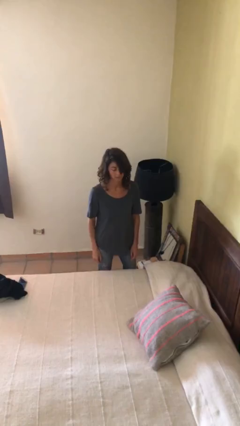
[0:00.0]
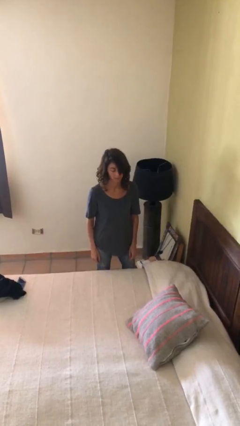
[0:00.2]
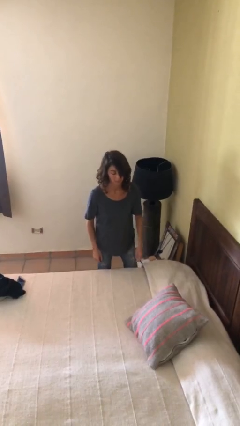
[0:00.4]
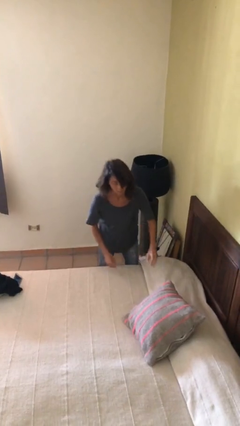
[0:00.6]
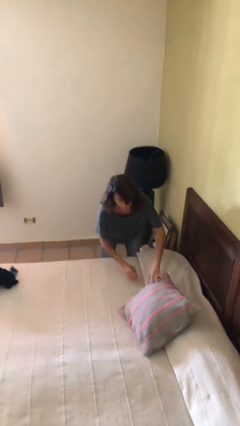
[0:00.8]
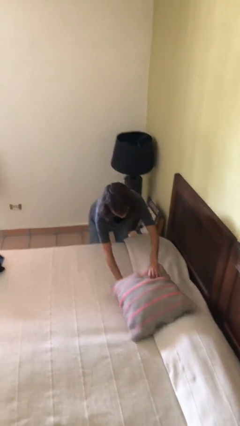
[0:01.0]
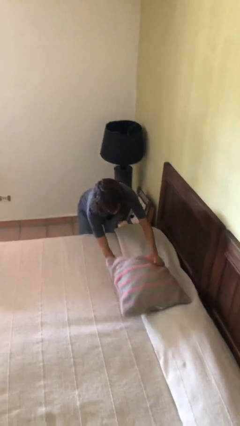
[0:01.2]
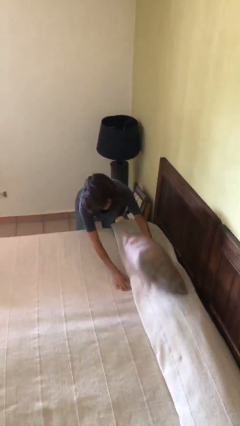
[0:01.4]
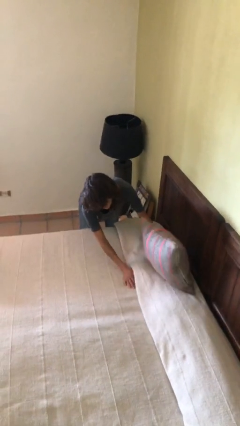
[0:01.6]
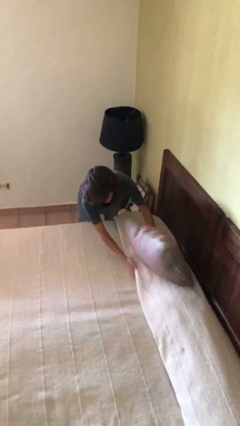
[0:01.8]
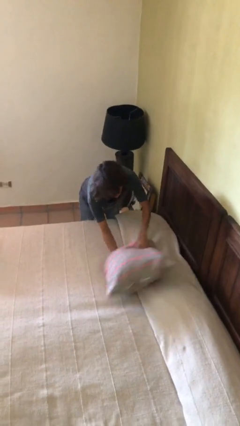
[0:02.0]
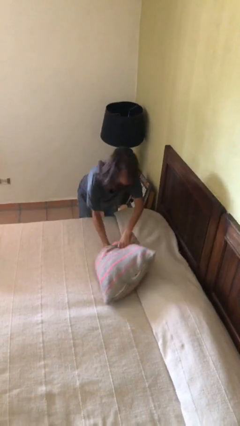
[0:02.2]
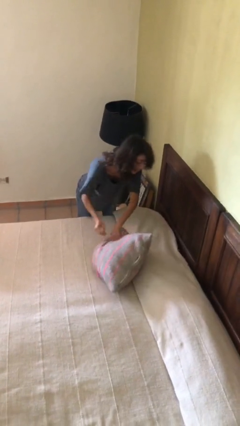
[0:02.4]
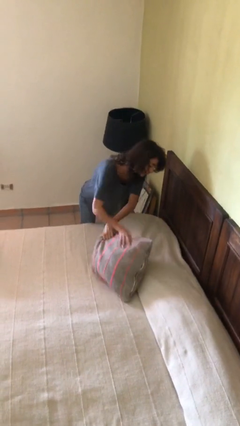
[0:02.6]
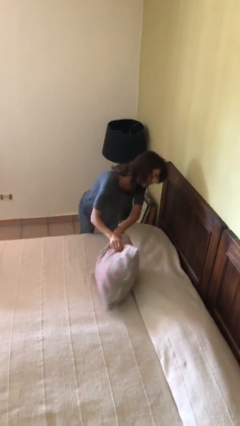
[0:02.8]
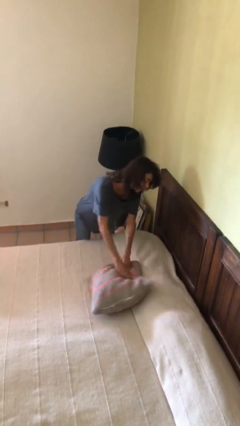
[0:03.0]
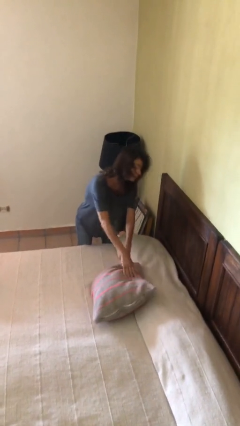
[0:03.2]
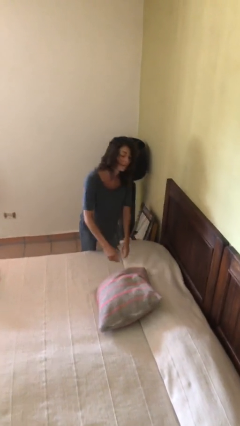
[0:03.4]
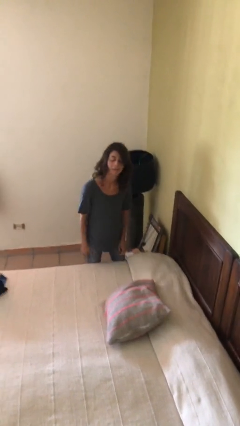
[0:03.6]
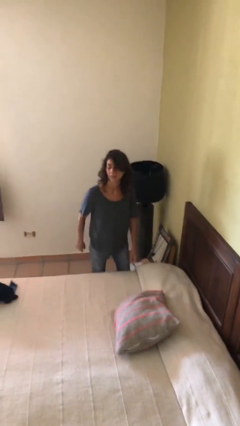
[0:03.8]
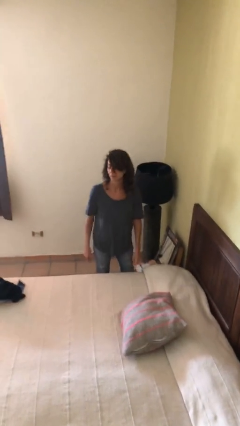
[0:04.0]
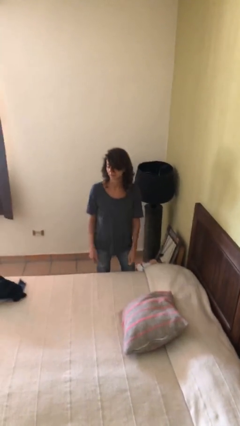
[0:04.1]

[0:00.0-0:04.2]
person searches in couch

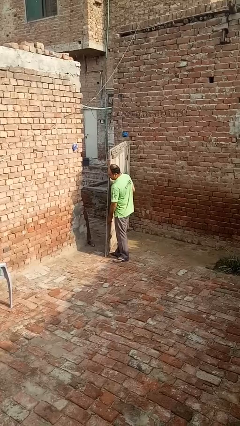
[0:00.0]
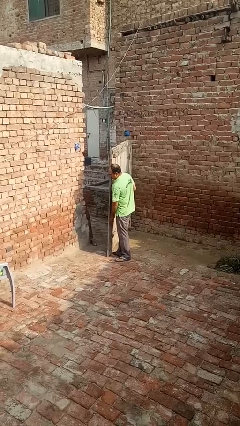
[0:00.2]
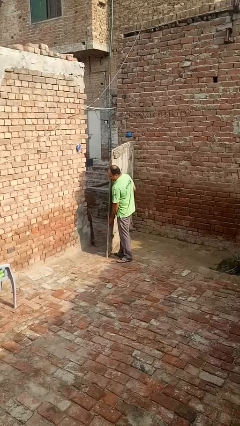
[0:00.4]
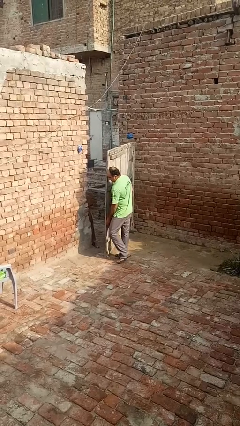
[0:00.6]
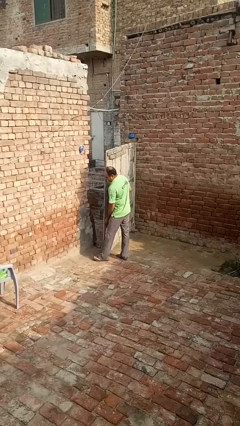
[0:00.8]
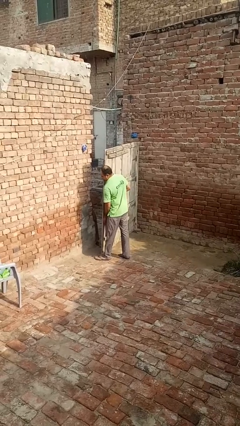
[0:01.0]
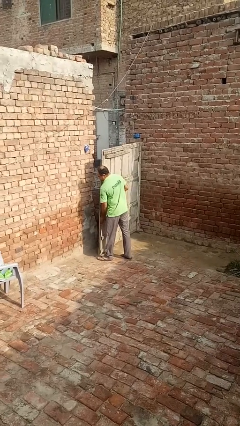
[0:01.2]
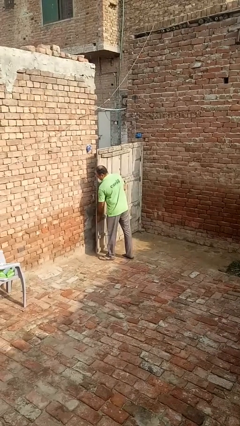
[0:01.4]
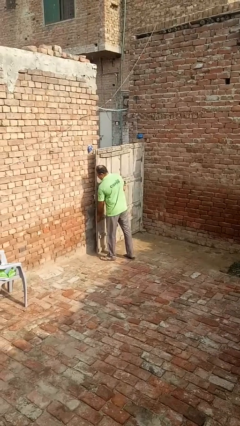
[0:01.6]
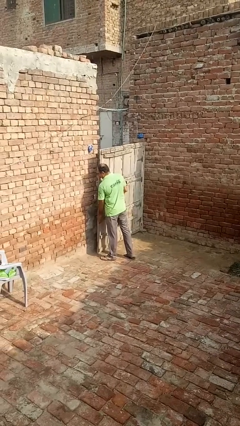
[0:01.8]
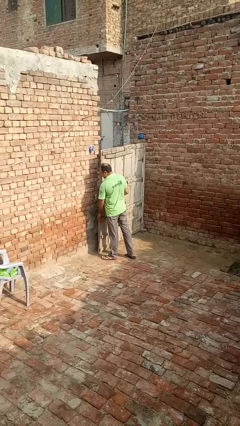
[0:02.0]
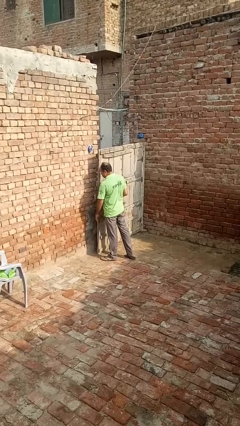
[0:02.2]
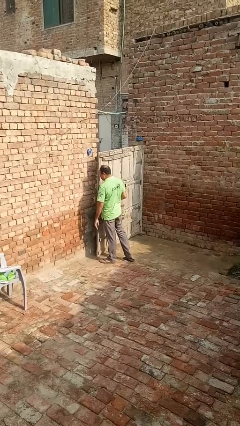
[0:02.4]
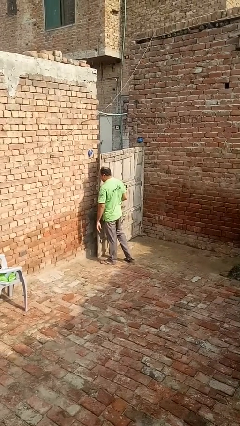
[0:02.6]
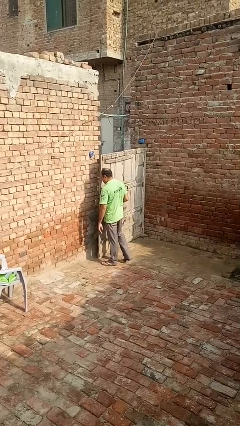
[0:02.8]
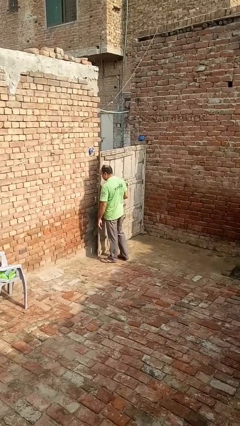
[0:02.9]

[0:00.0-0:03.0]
person closes gate

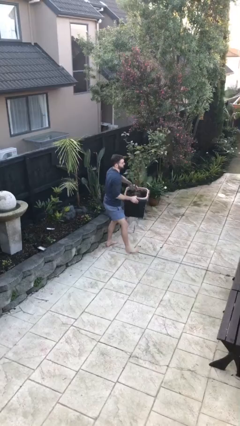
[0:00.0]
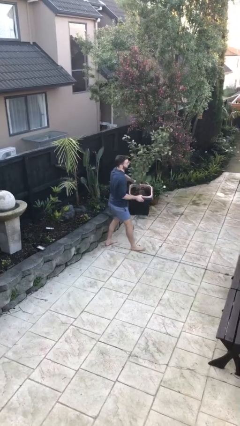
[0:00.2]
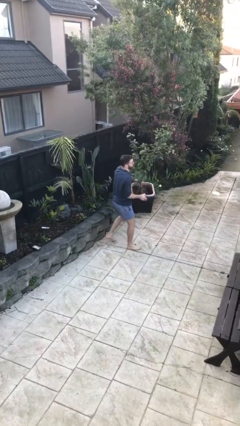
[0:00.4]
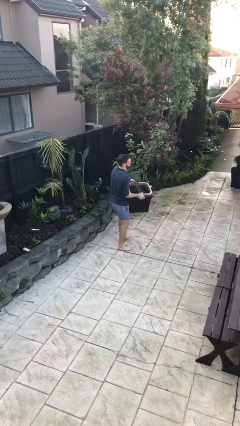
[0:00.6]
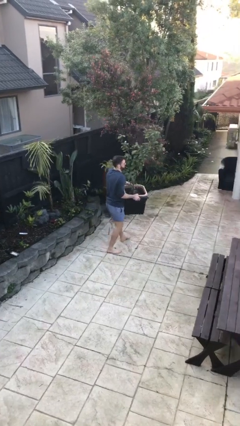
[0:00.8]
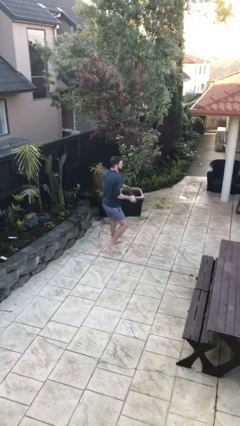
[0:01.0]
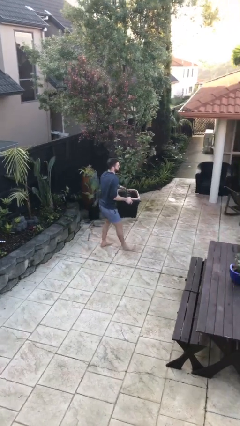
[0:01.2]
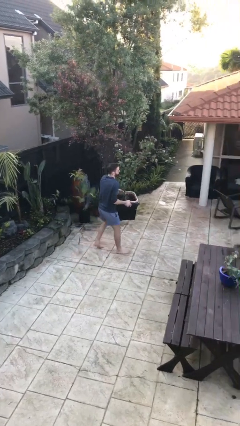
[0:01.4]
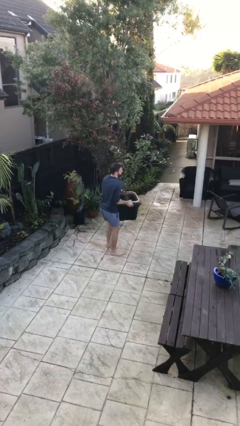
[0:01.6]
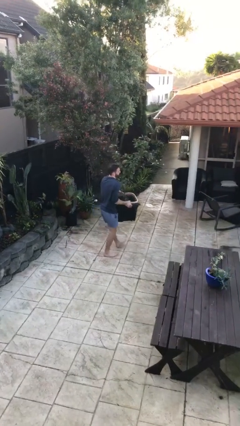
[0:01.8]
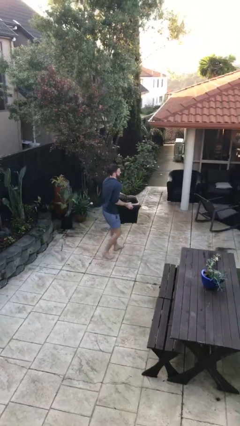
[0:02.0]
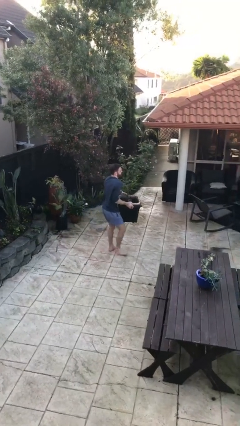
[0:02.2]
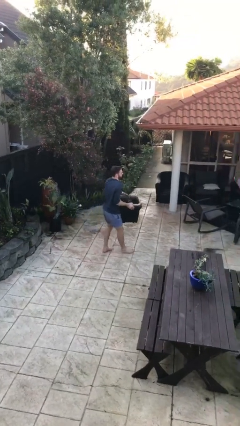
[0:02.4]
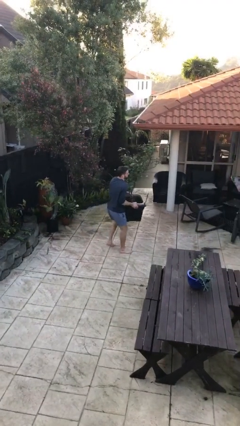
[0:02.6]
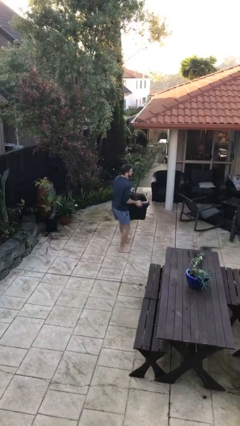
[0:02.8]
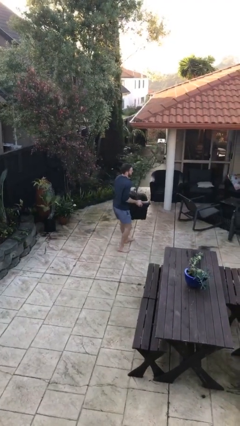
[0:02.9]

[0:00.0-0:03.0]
person carries heavy object

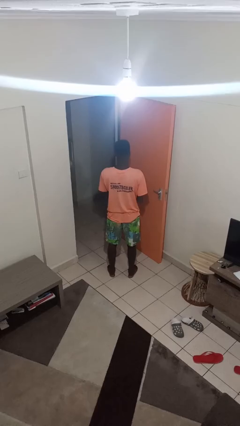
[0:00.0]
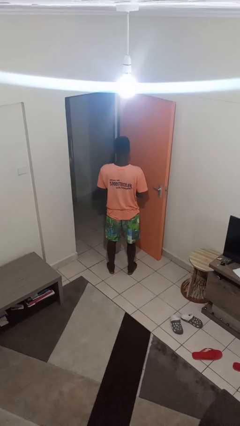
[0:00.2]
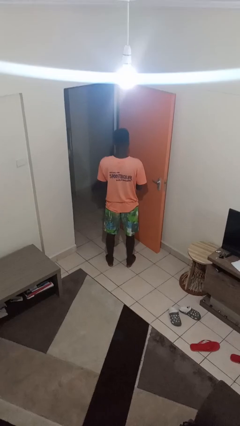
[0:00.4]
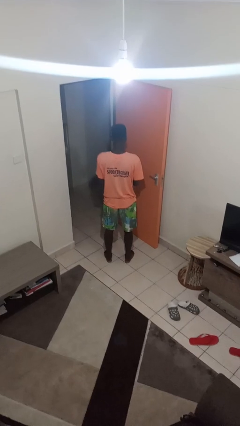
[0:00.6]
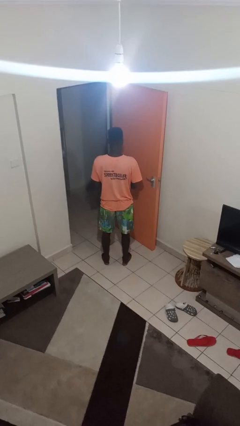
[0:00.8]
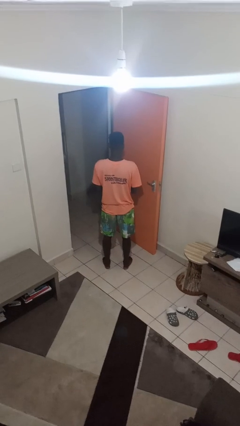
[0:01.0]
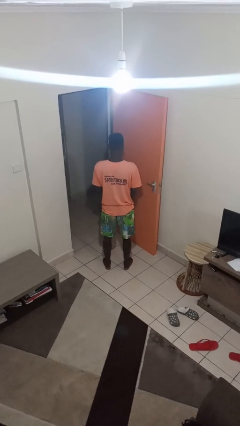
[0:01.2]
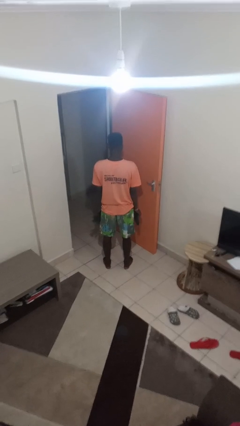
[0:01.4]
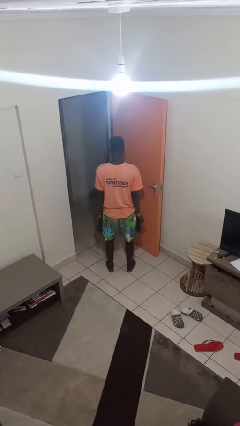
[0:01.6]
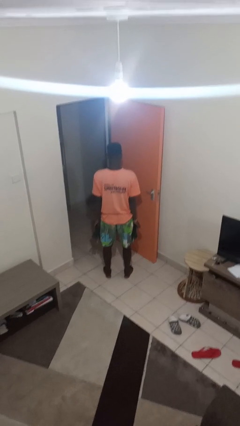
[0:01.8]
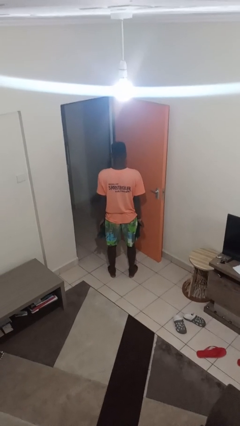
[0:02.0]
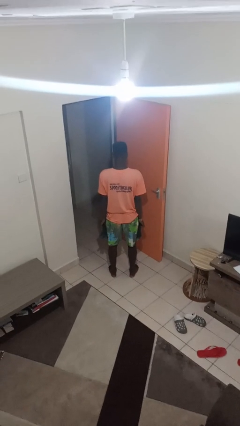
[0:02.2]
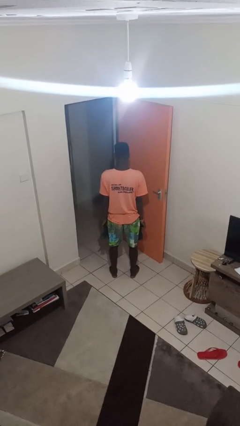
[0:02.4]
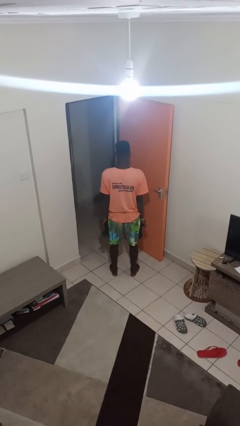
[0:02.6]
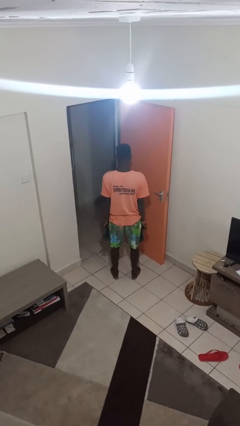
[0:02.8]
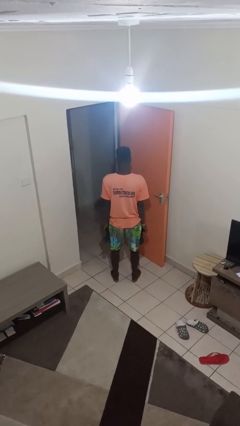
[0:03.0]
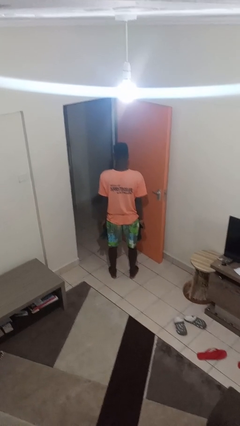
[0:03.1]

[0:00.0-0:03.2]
person takes off gloves

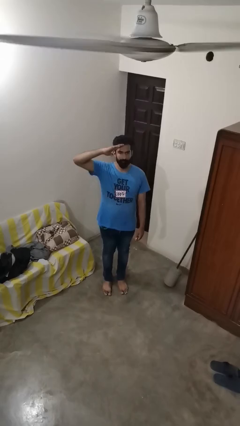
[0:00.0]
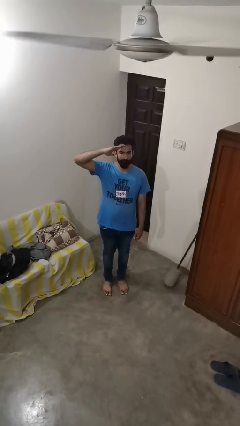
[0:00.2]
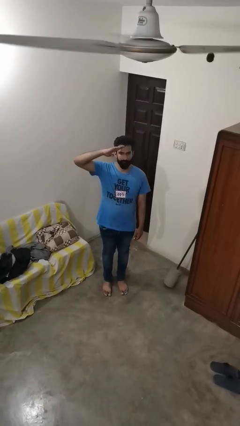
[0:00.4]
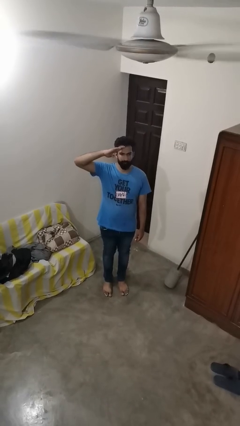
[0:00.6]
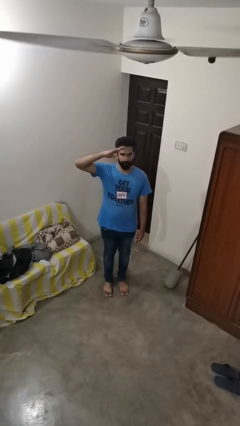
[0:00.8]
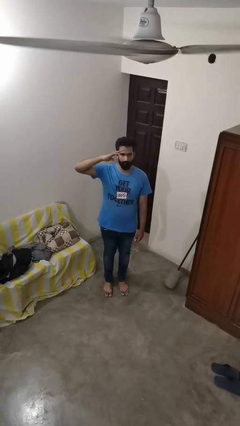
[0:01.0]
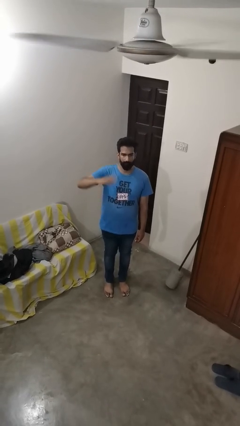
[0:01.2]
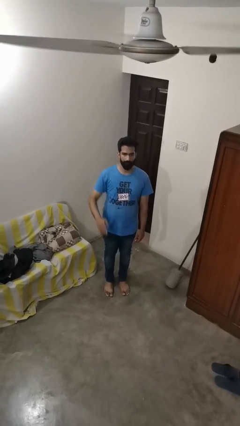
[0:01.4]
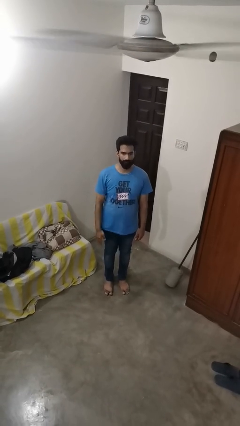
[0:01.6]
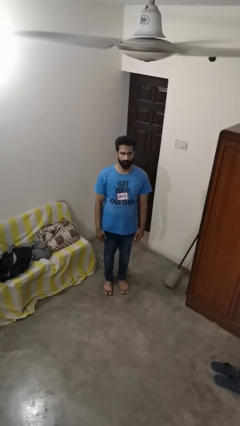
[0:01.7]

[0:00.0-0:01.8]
person salutes

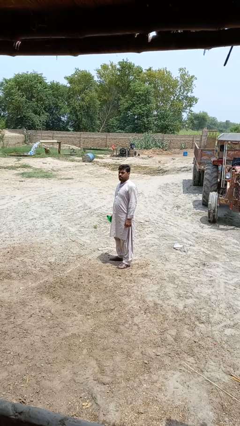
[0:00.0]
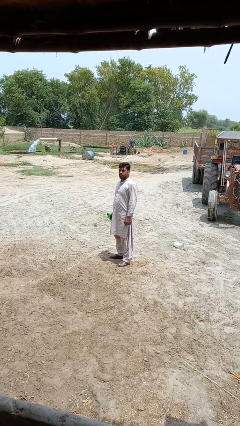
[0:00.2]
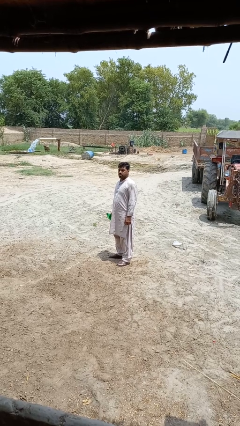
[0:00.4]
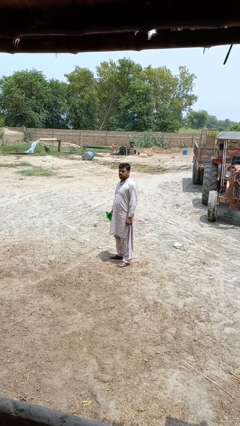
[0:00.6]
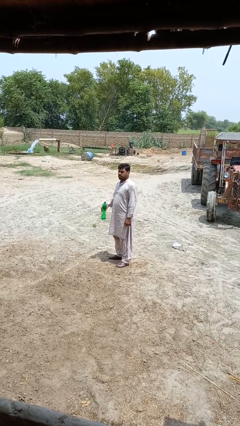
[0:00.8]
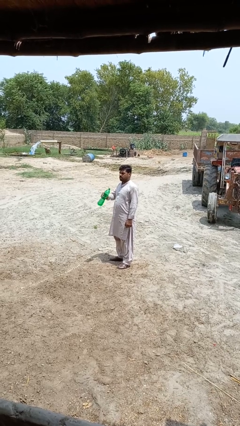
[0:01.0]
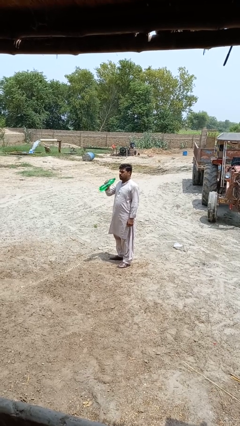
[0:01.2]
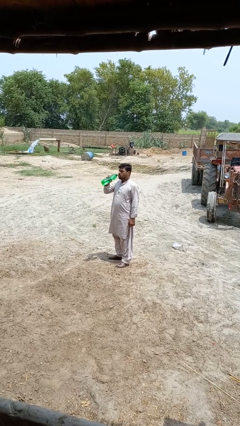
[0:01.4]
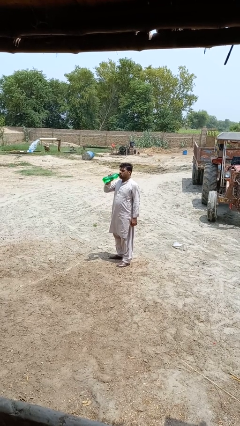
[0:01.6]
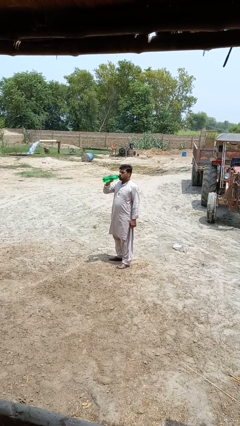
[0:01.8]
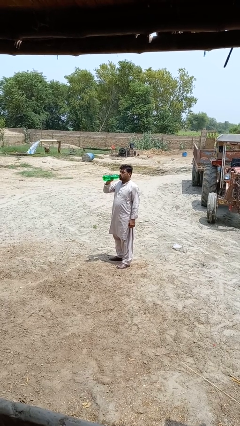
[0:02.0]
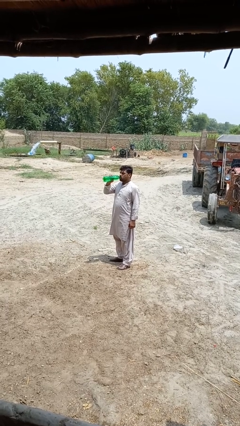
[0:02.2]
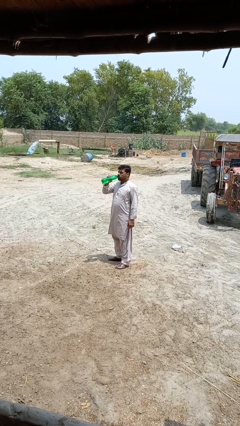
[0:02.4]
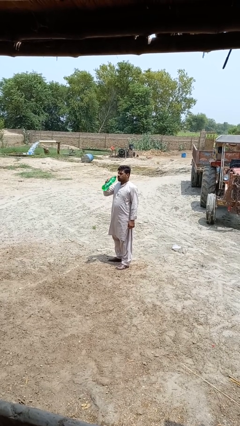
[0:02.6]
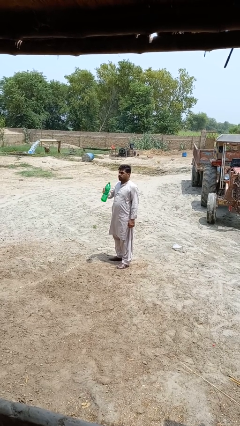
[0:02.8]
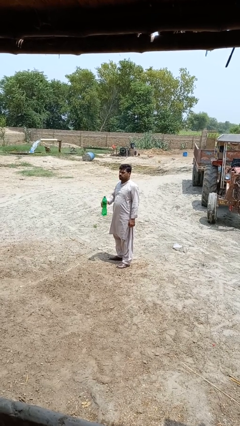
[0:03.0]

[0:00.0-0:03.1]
person drinks from bottle
